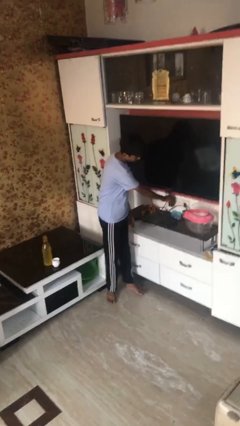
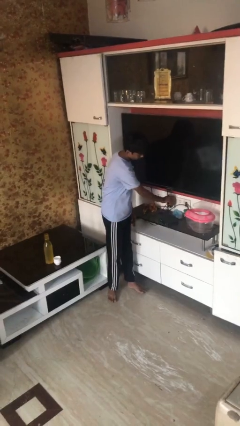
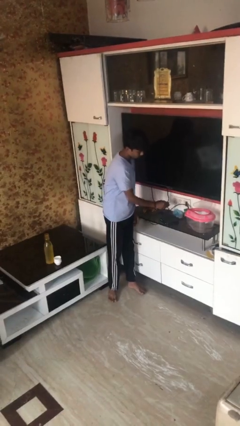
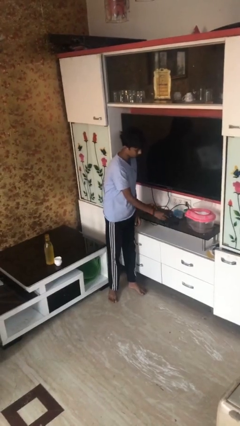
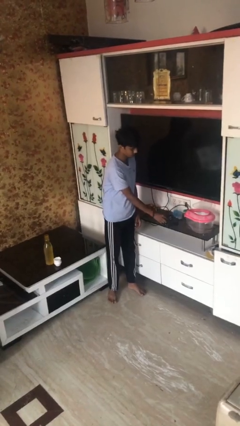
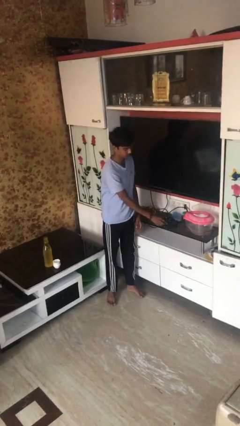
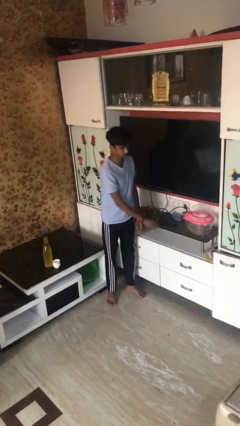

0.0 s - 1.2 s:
person unplugs from electrical socket

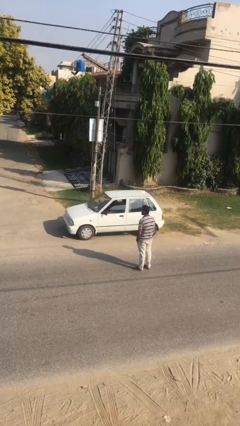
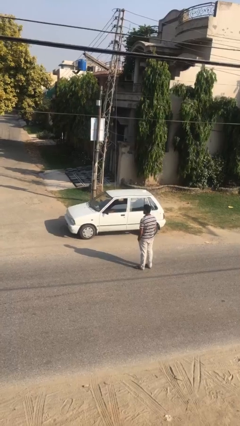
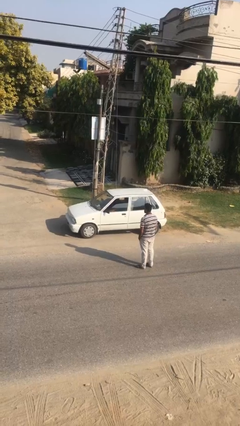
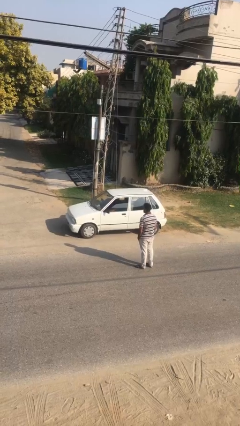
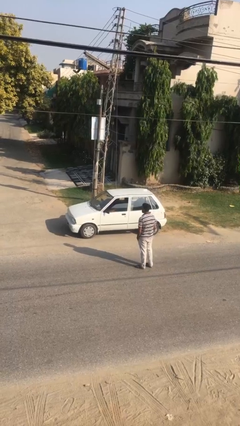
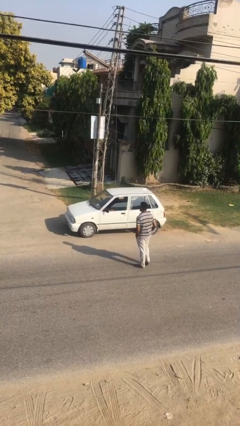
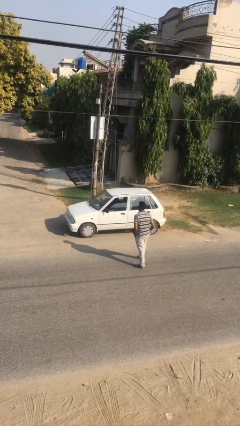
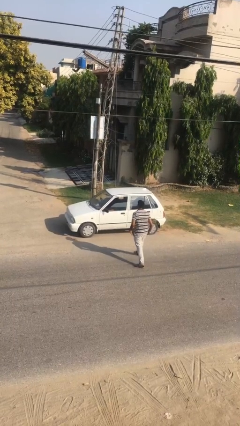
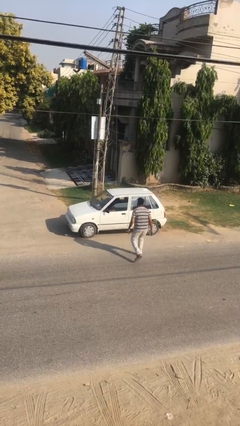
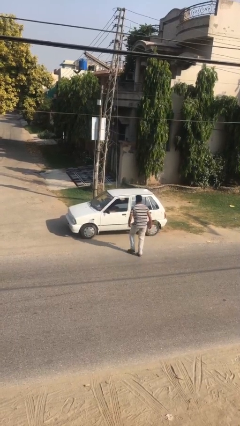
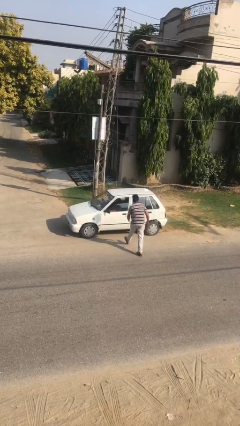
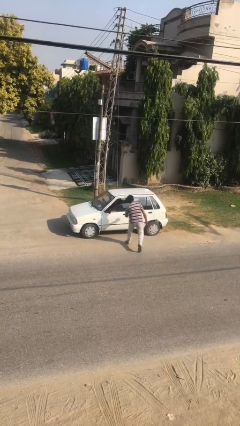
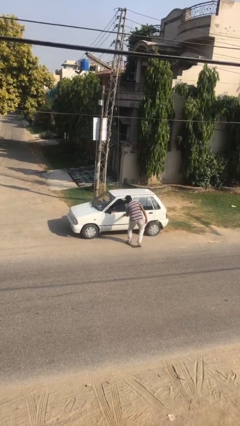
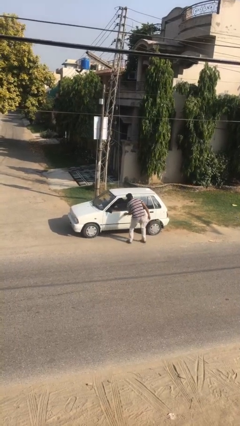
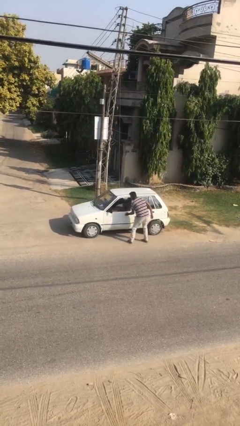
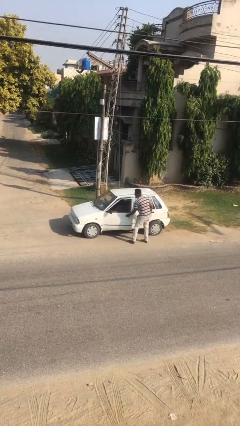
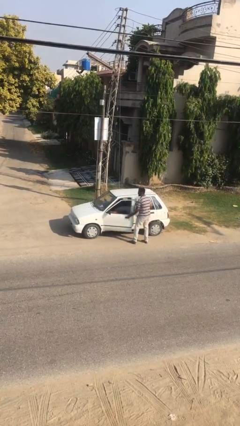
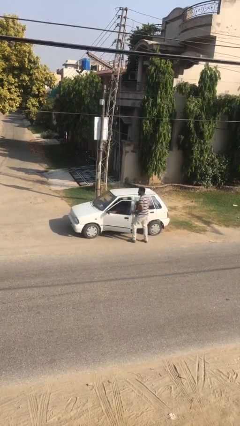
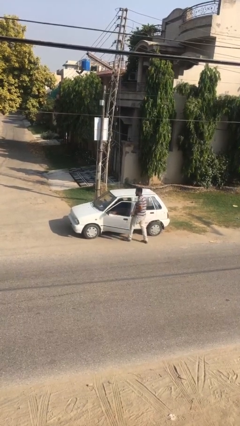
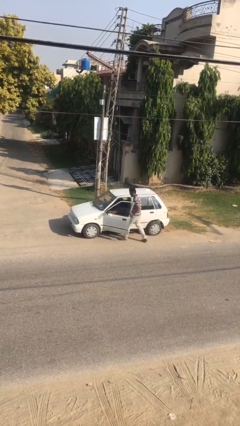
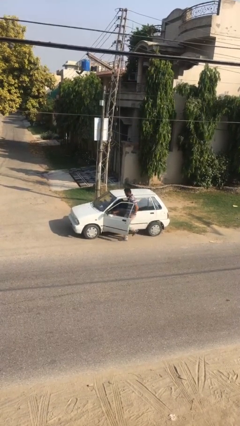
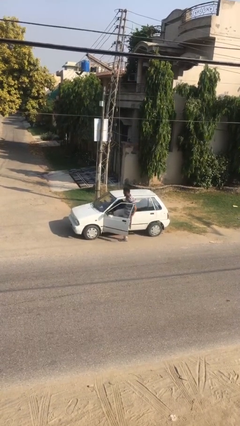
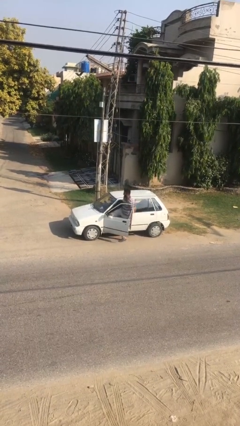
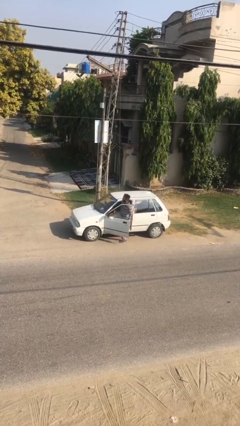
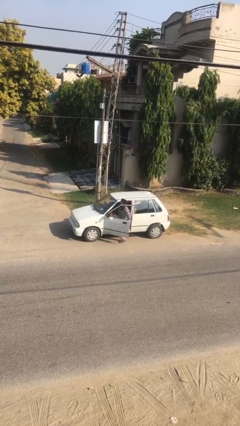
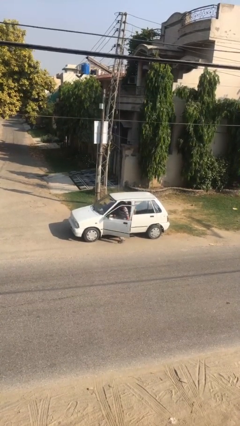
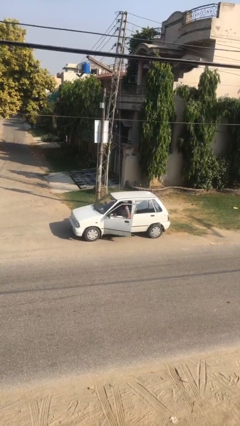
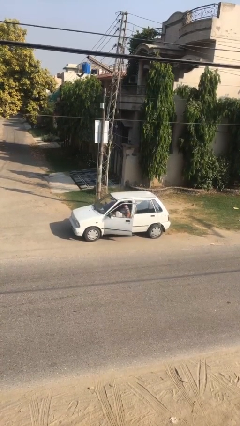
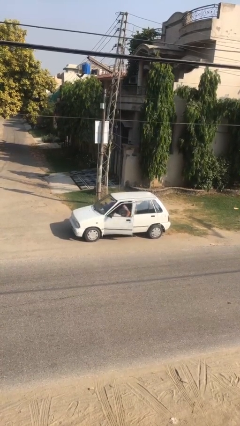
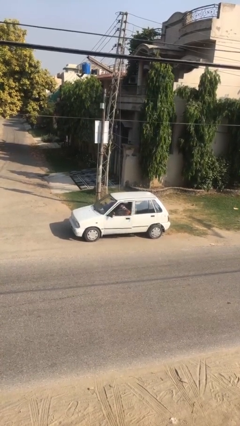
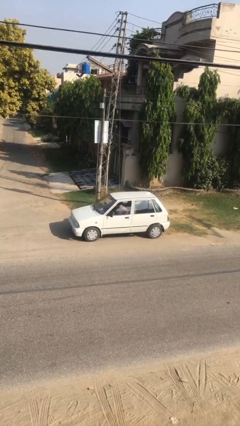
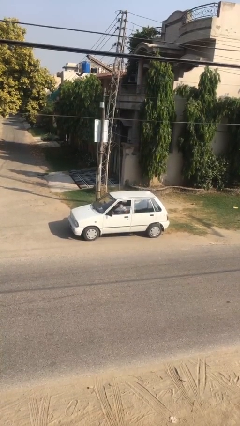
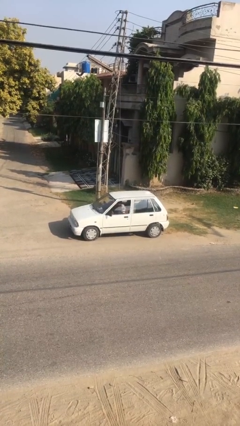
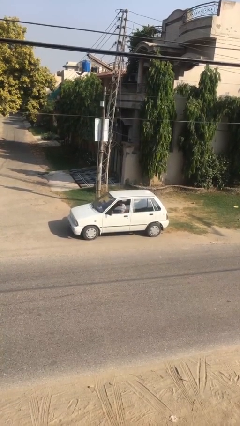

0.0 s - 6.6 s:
car picks up person

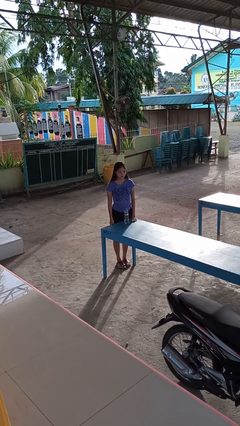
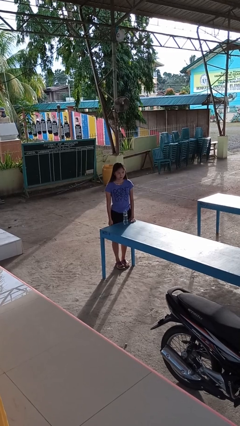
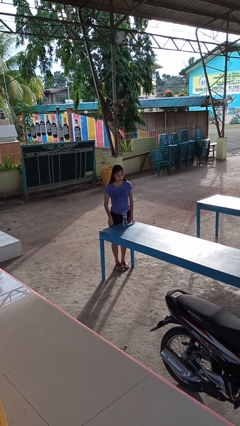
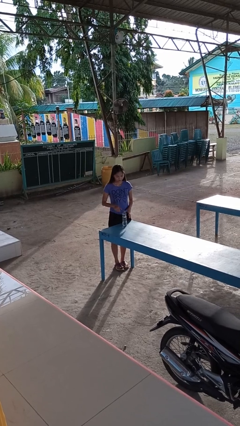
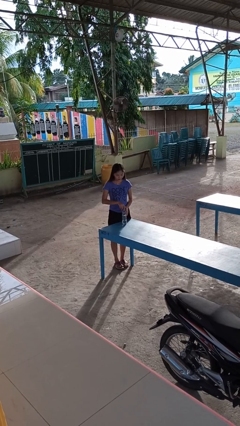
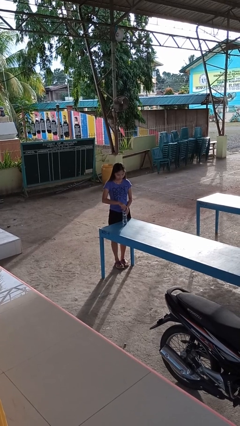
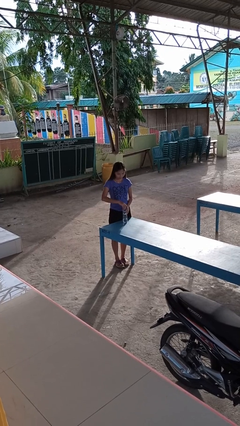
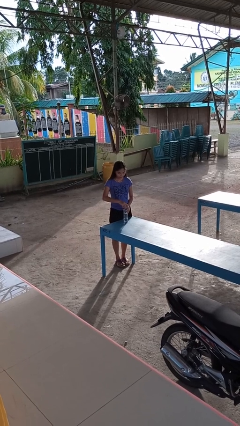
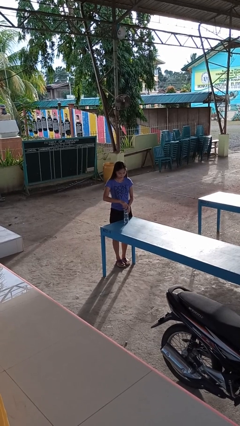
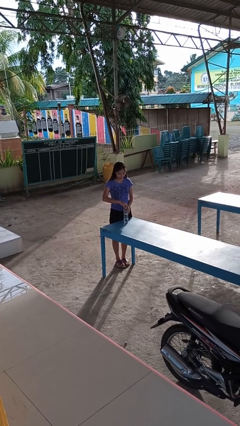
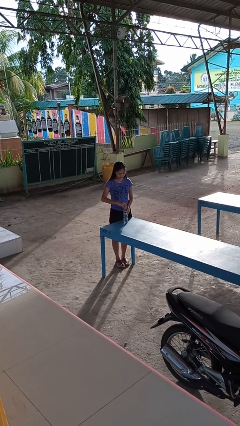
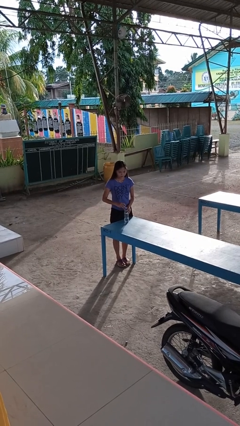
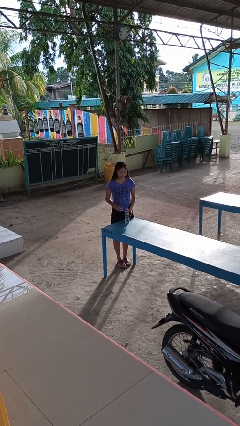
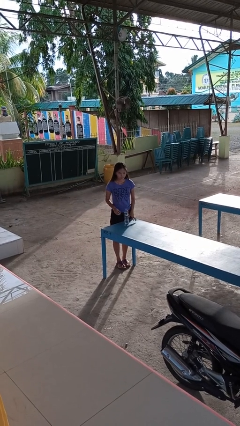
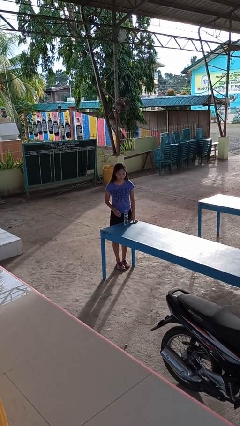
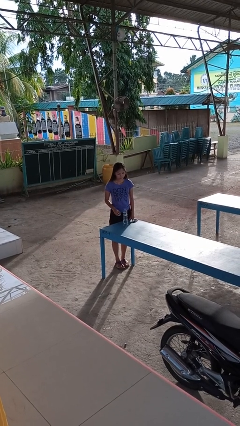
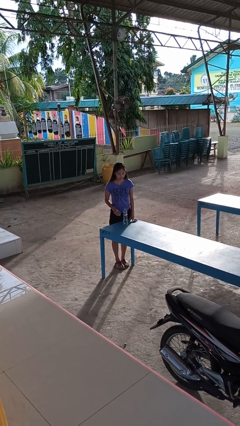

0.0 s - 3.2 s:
person unscrews lid from bottle

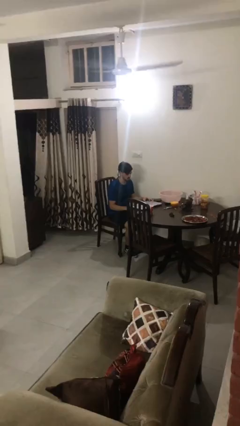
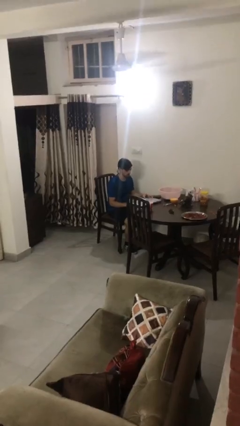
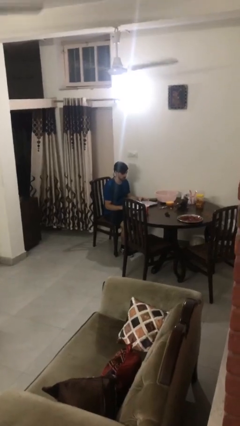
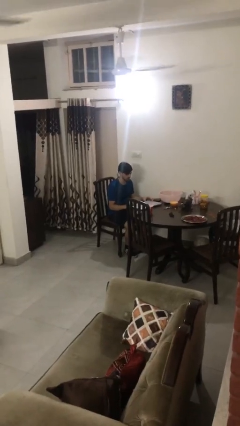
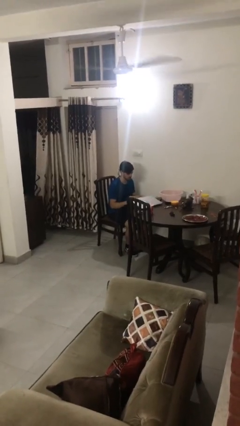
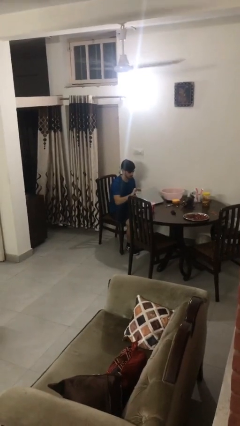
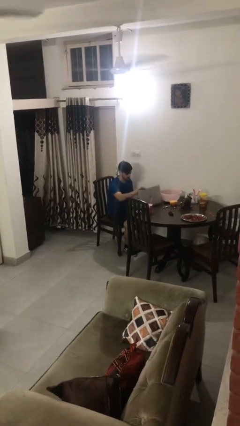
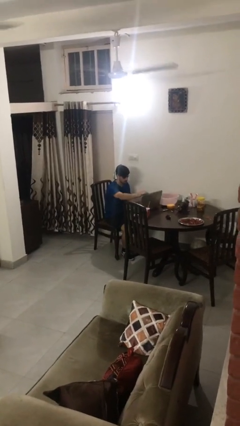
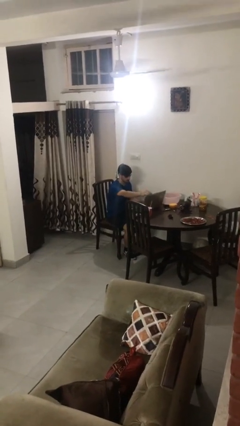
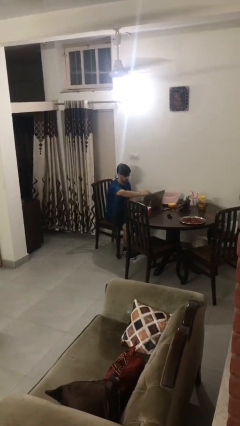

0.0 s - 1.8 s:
person opens laptop

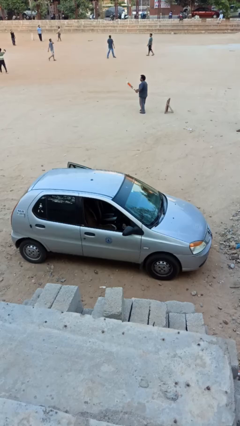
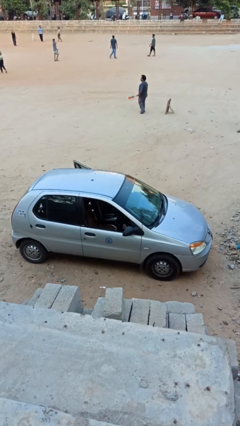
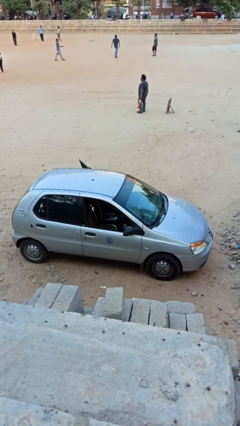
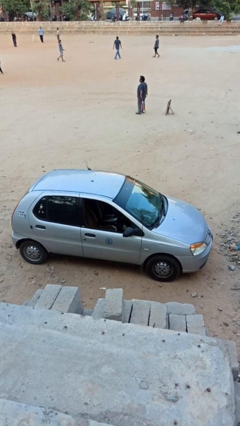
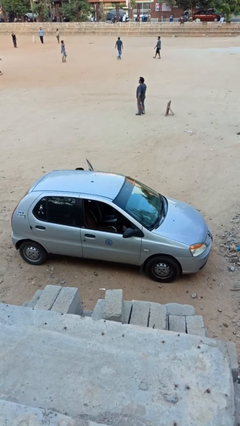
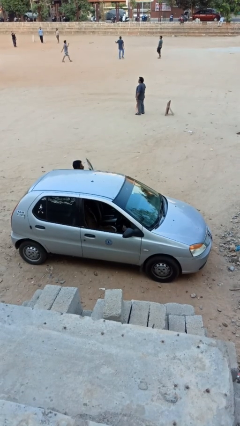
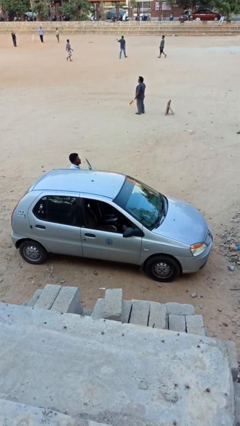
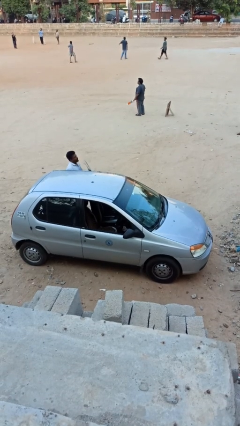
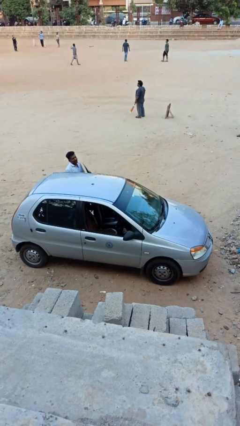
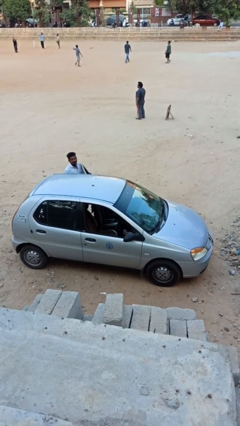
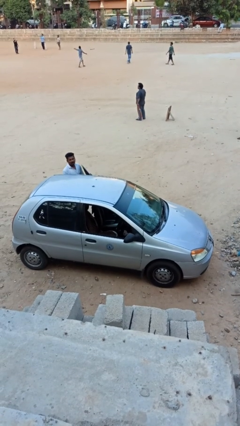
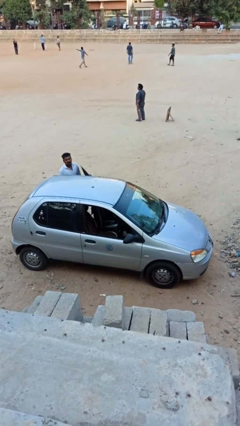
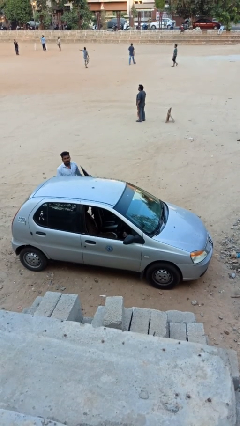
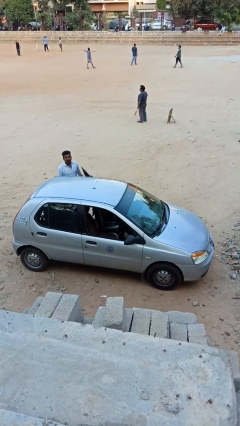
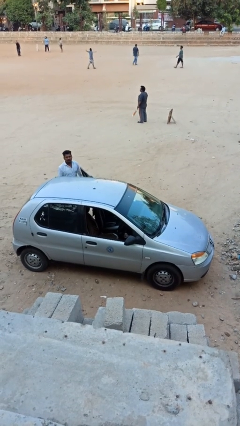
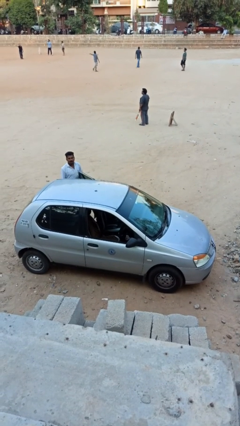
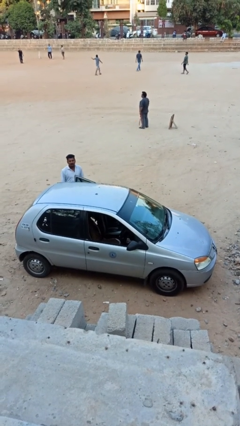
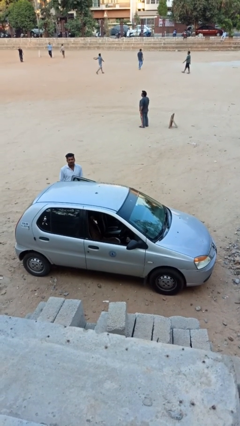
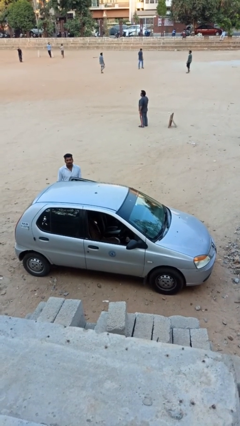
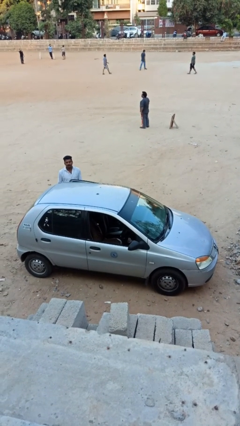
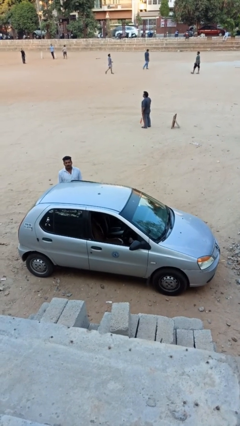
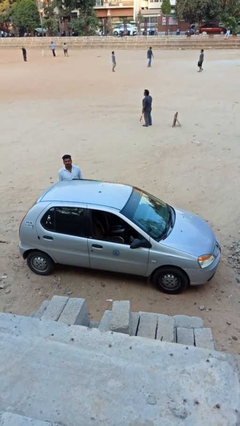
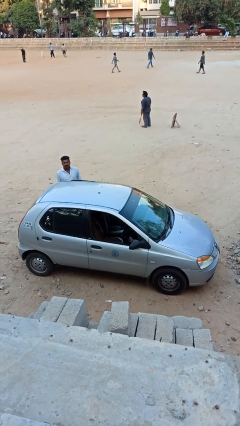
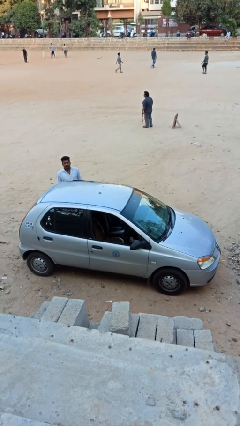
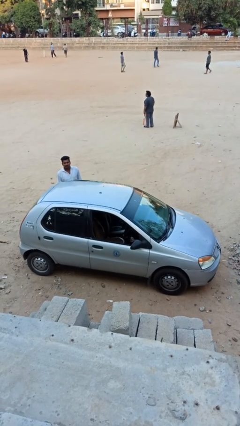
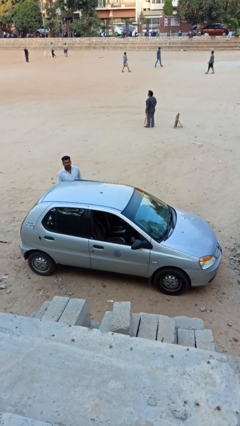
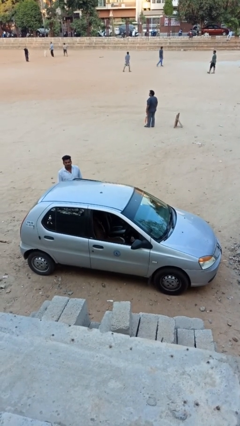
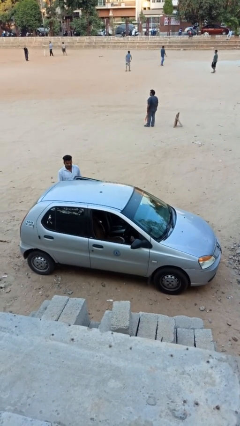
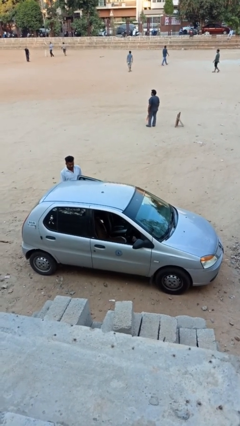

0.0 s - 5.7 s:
car drops off person
